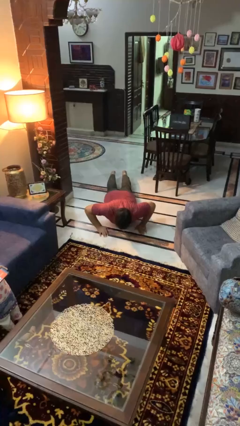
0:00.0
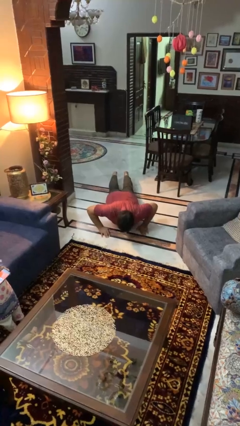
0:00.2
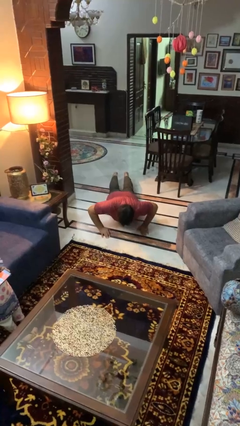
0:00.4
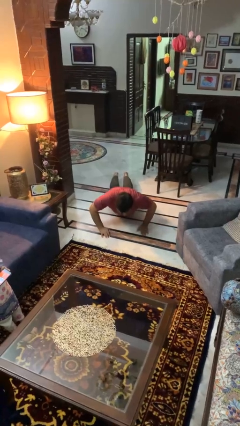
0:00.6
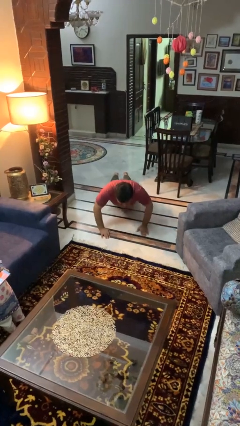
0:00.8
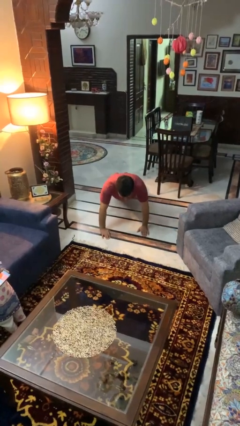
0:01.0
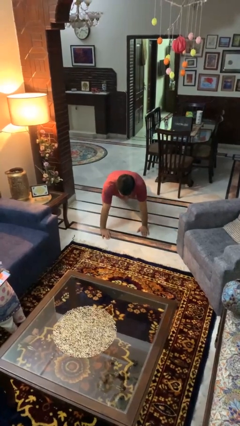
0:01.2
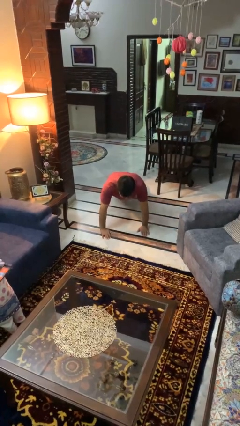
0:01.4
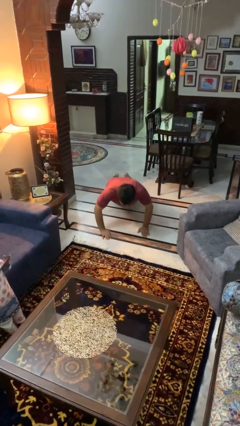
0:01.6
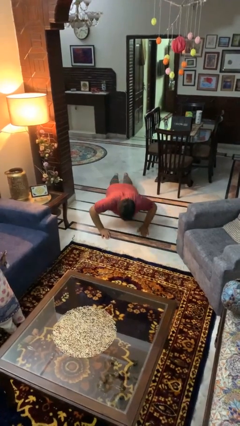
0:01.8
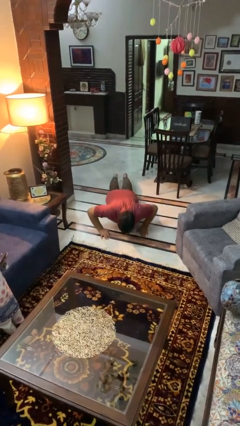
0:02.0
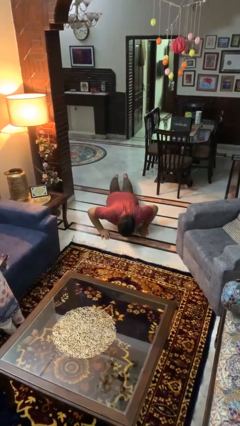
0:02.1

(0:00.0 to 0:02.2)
person exercises with pushup

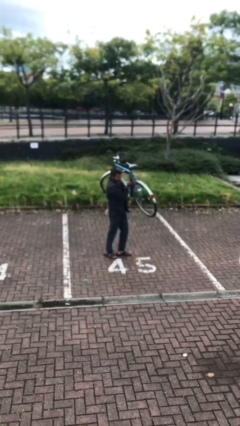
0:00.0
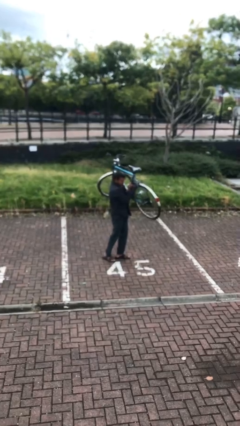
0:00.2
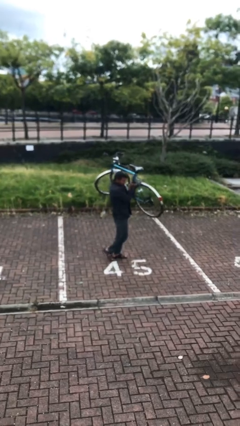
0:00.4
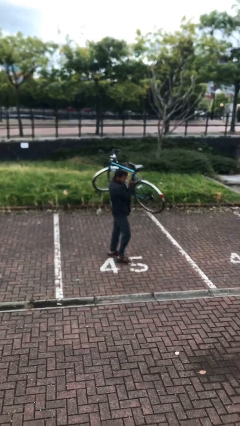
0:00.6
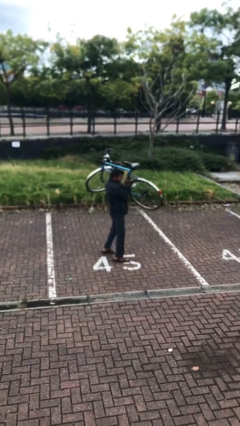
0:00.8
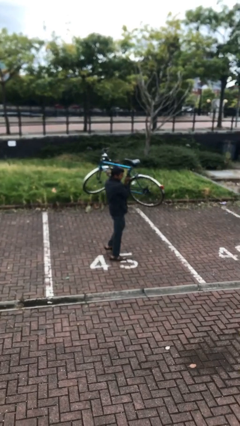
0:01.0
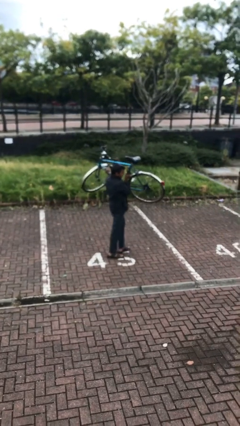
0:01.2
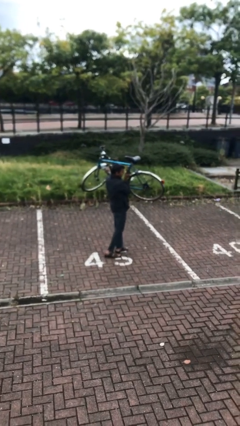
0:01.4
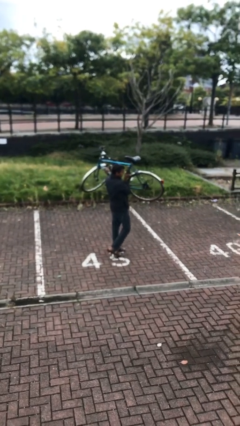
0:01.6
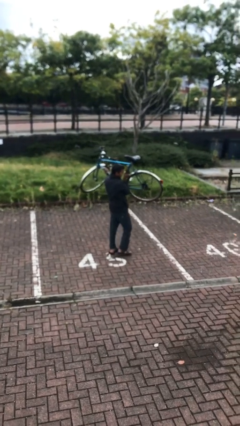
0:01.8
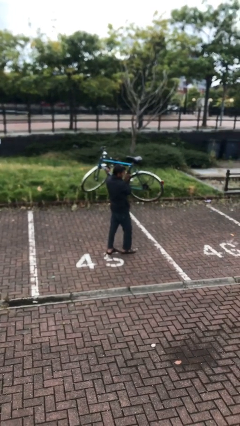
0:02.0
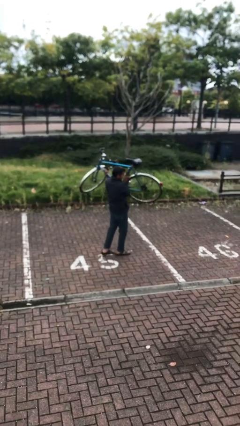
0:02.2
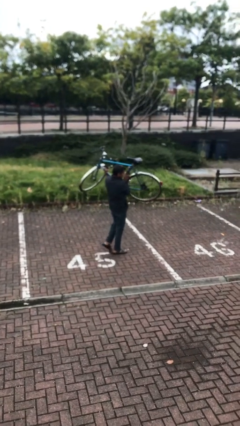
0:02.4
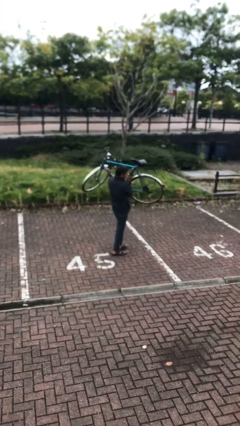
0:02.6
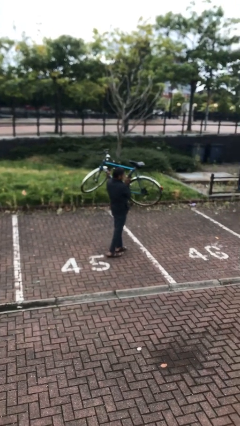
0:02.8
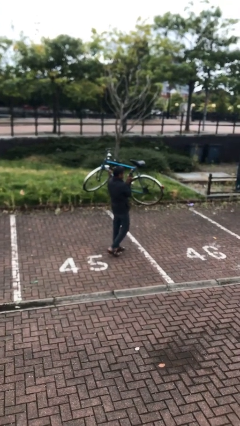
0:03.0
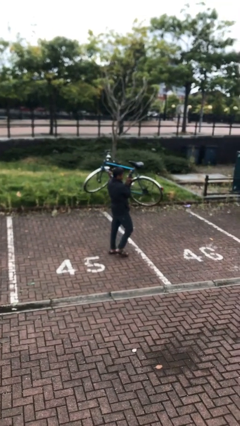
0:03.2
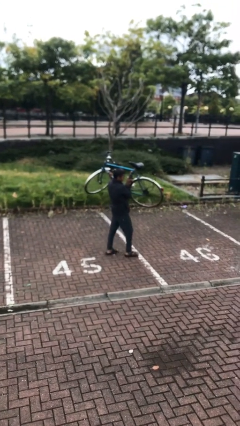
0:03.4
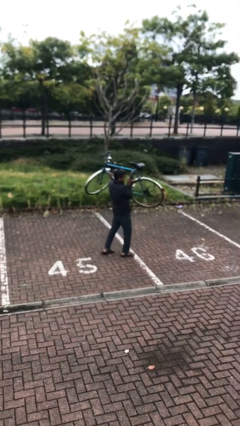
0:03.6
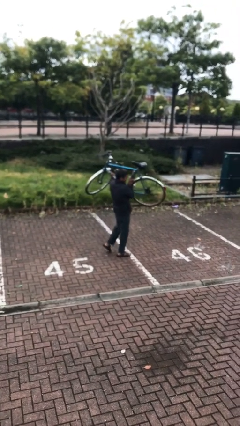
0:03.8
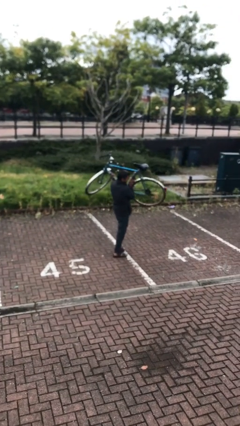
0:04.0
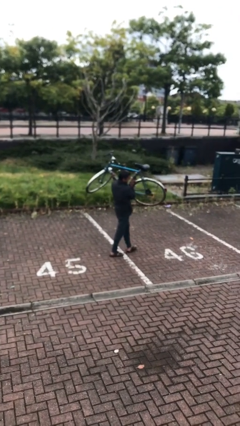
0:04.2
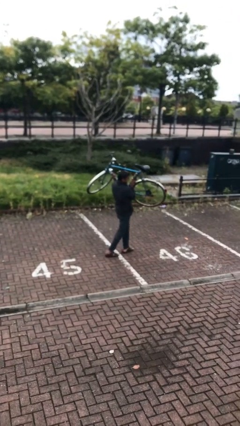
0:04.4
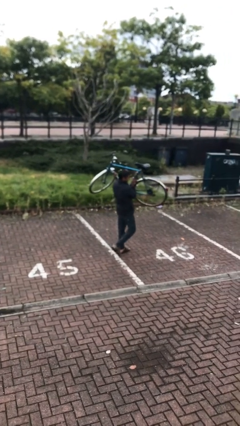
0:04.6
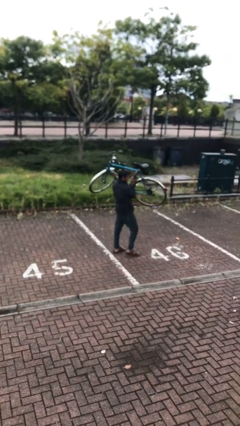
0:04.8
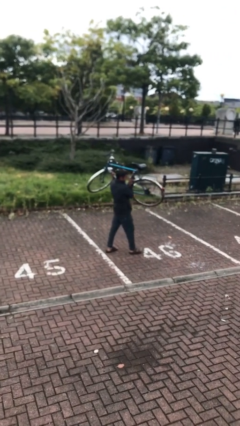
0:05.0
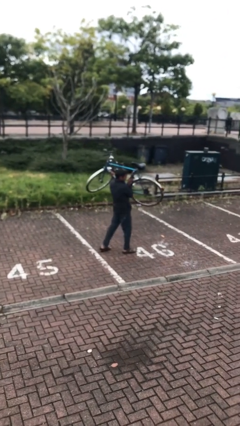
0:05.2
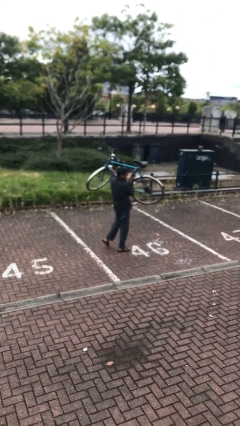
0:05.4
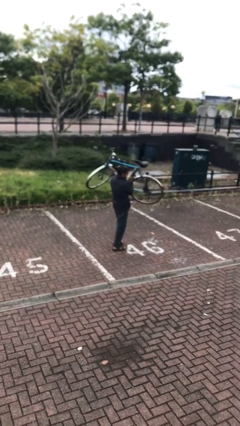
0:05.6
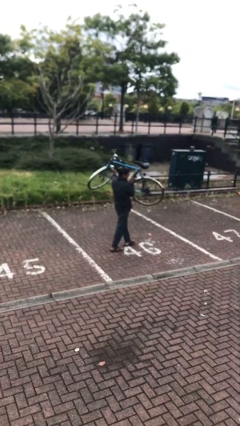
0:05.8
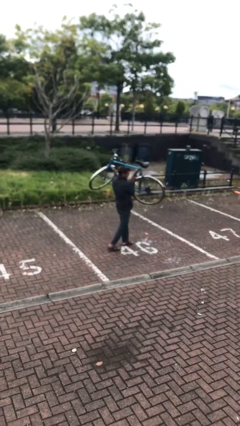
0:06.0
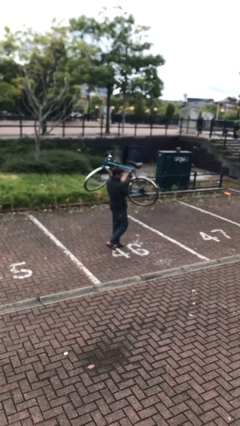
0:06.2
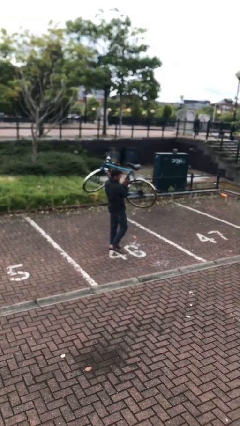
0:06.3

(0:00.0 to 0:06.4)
person carries heavy object

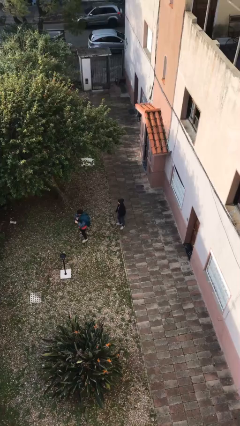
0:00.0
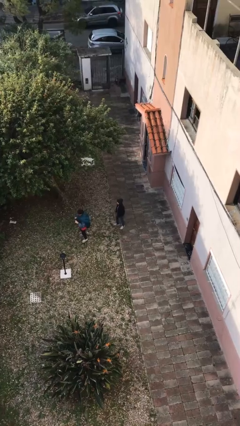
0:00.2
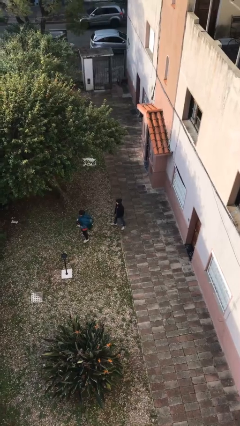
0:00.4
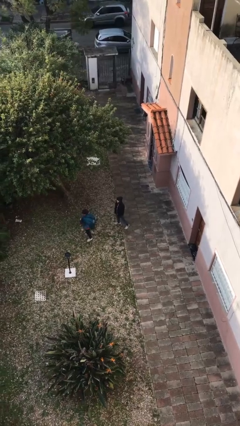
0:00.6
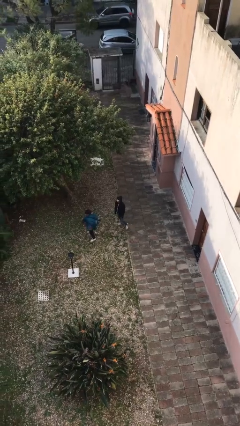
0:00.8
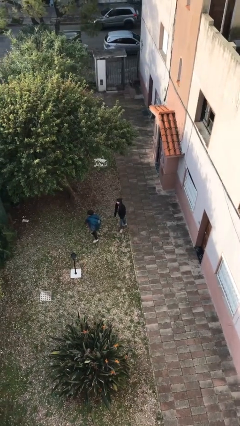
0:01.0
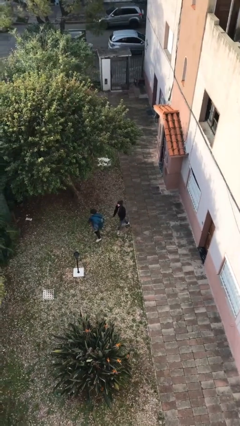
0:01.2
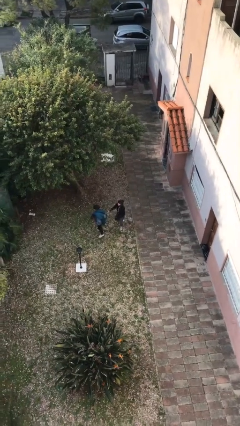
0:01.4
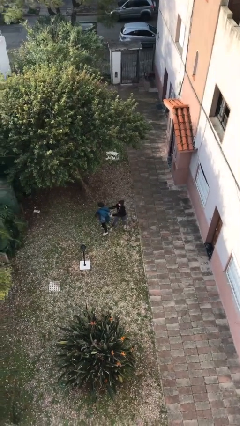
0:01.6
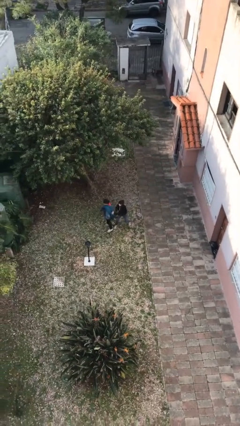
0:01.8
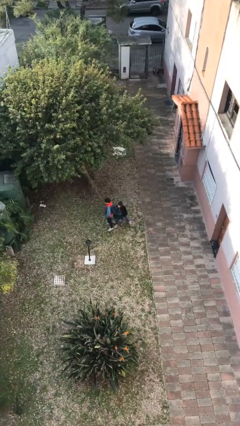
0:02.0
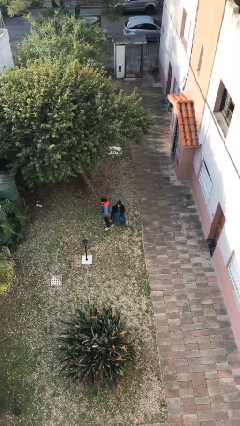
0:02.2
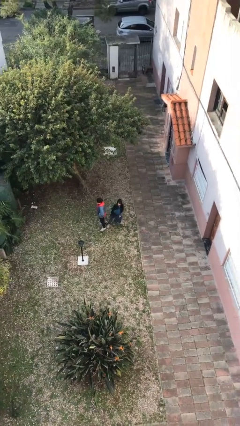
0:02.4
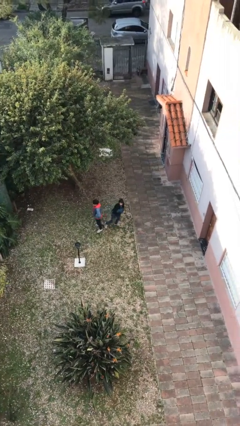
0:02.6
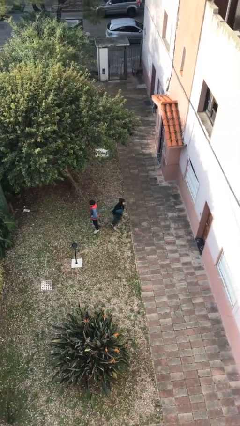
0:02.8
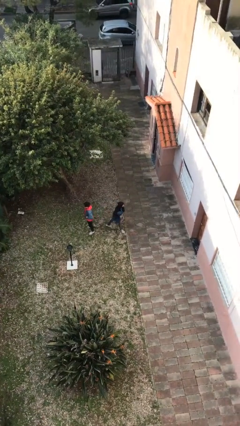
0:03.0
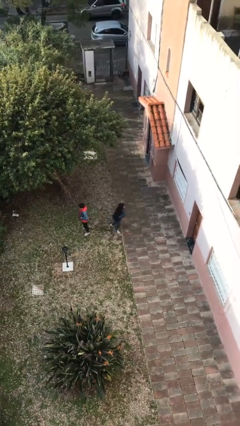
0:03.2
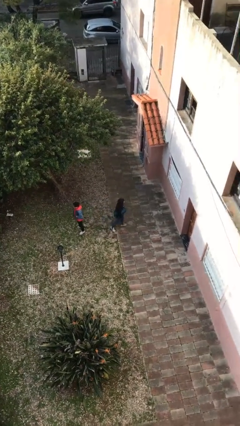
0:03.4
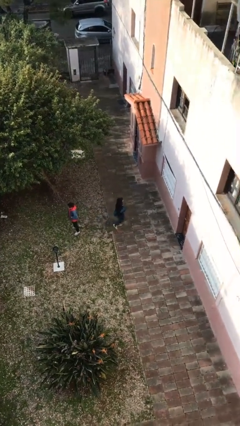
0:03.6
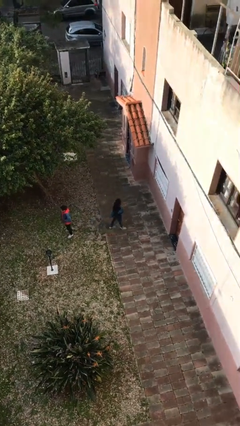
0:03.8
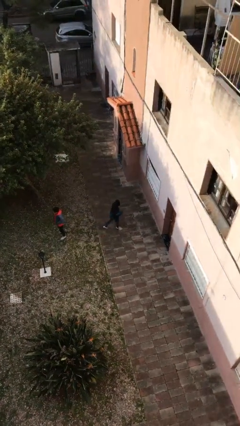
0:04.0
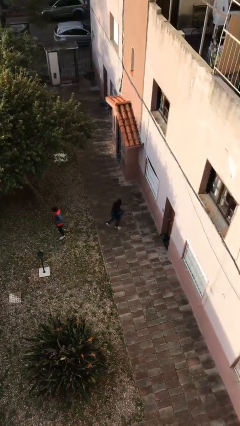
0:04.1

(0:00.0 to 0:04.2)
person steals object from person

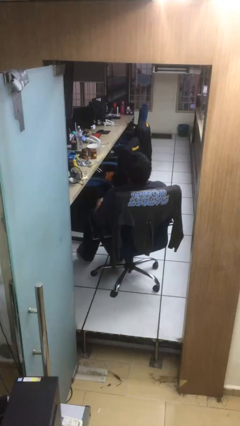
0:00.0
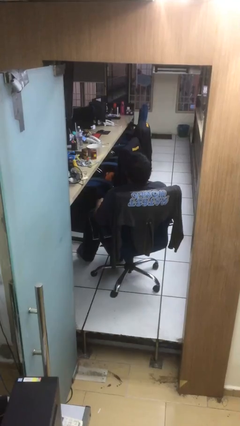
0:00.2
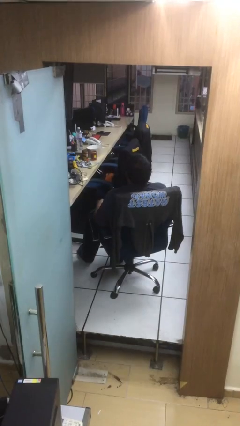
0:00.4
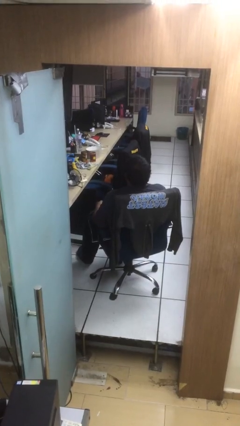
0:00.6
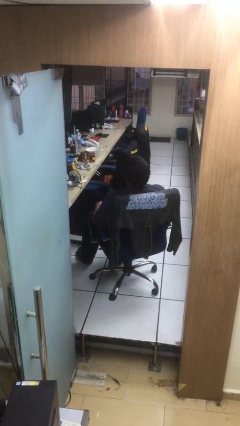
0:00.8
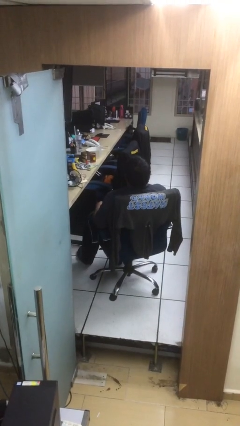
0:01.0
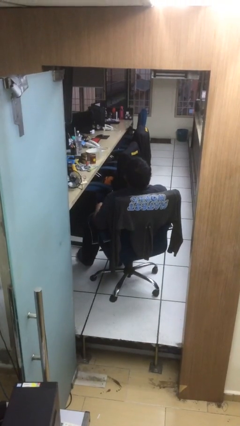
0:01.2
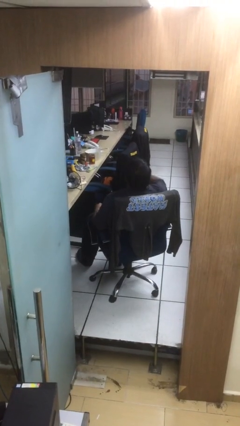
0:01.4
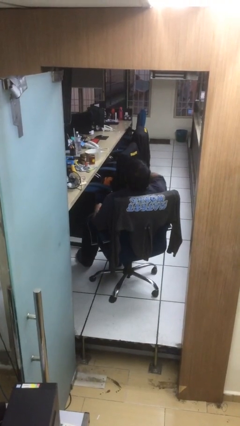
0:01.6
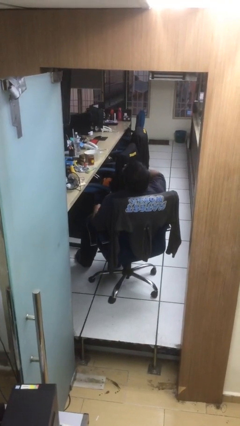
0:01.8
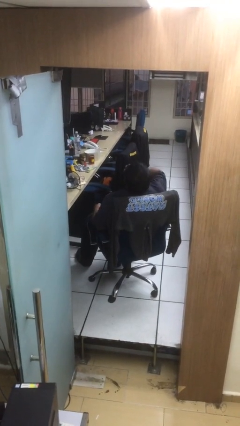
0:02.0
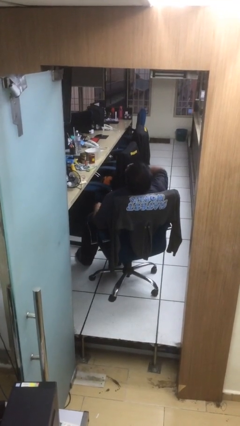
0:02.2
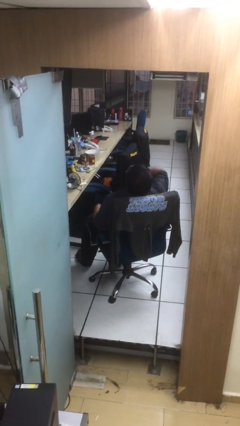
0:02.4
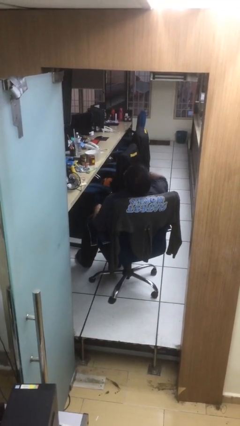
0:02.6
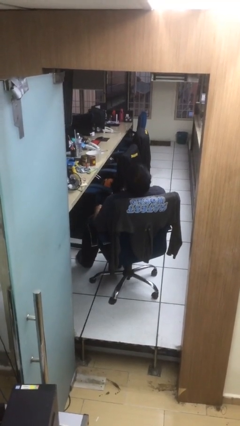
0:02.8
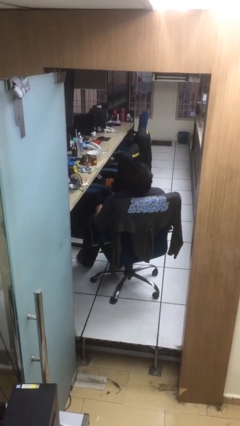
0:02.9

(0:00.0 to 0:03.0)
person yawns

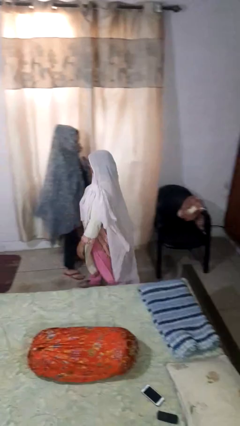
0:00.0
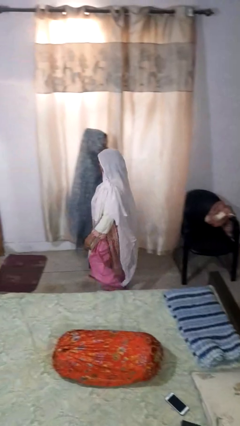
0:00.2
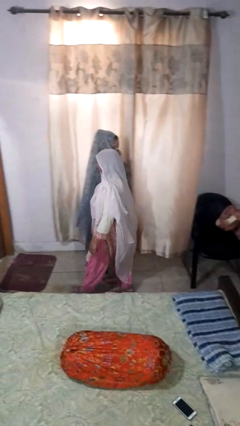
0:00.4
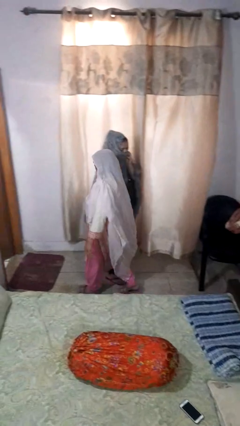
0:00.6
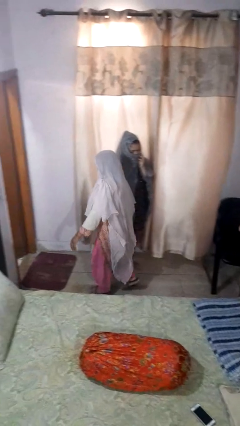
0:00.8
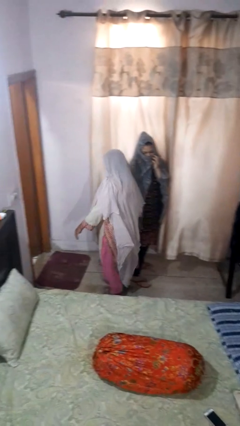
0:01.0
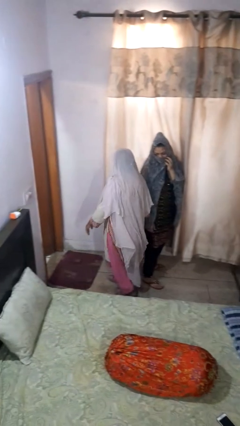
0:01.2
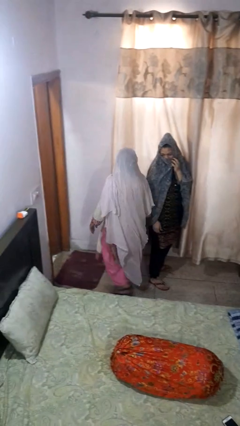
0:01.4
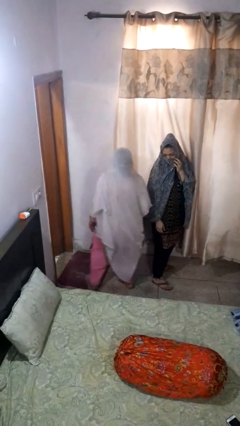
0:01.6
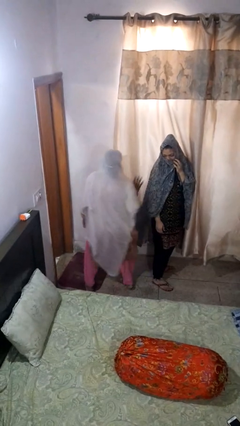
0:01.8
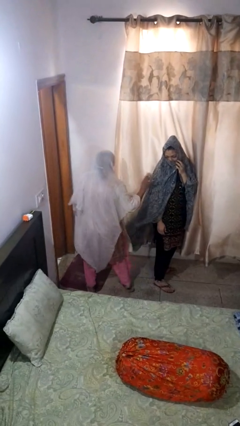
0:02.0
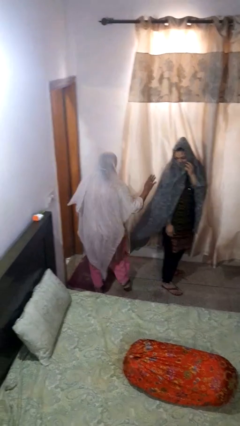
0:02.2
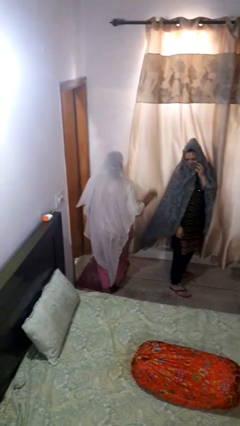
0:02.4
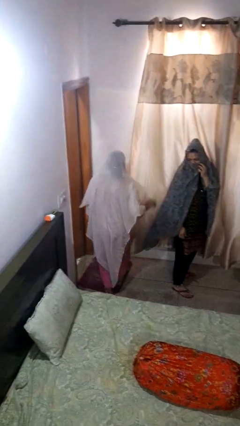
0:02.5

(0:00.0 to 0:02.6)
person bumps into person
